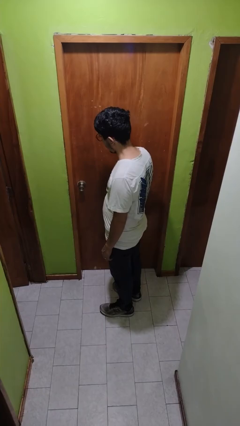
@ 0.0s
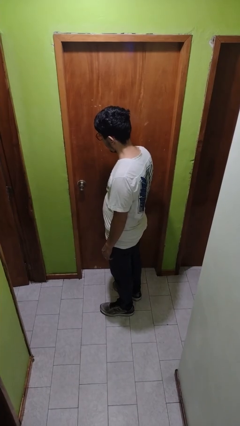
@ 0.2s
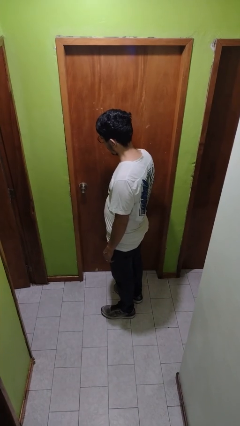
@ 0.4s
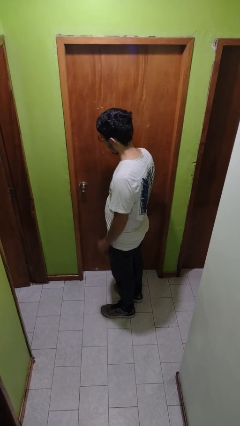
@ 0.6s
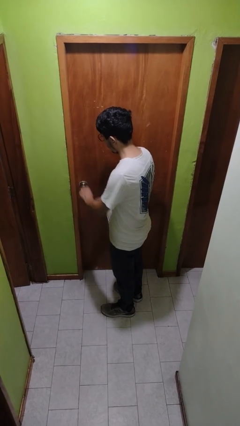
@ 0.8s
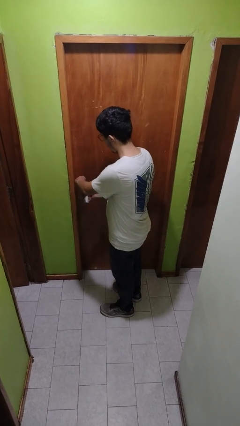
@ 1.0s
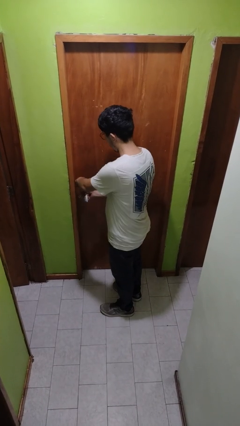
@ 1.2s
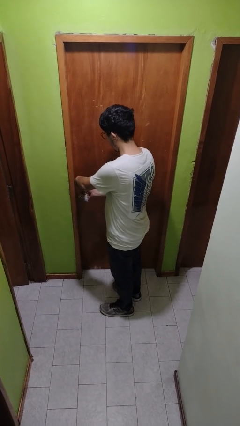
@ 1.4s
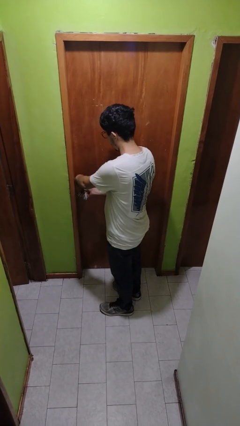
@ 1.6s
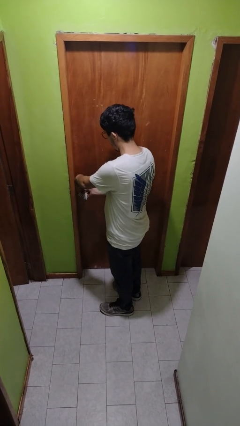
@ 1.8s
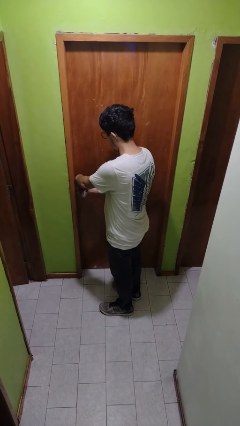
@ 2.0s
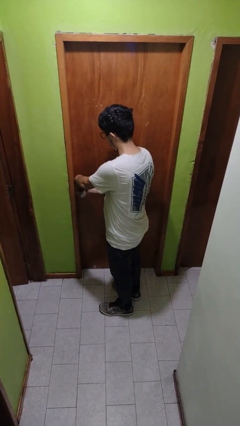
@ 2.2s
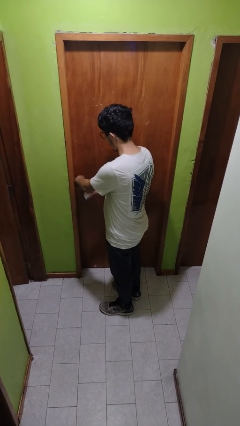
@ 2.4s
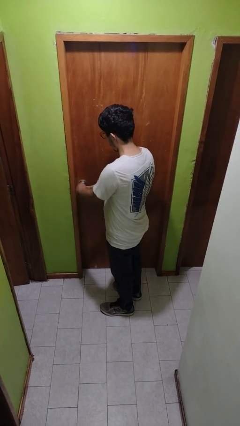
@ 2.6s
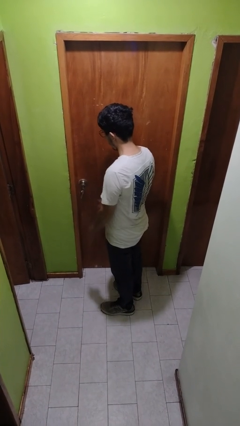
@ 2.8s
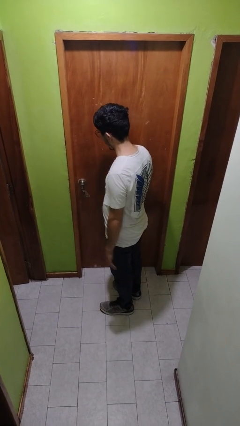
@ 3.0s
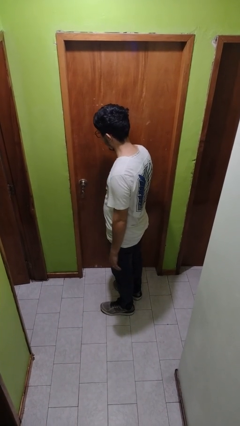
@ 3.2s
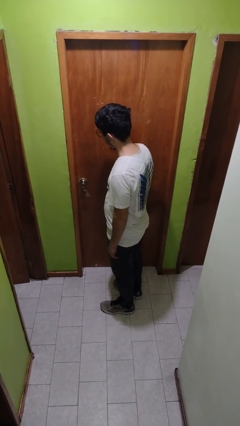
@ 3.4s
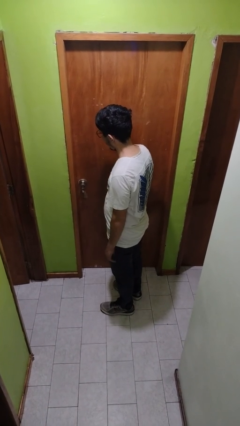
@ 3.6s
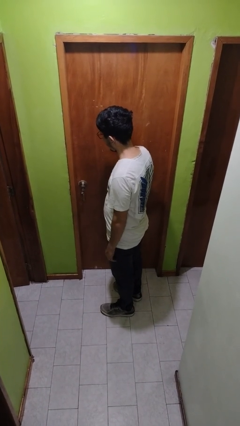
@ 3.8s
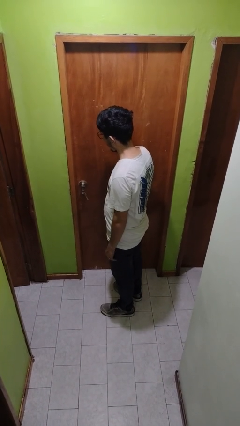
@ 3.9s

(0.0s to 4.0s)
person unlocks door with keys

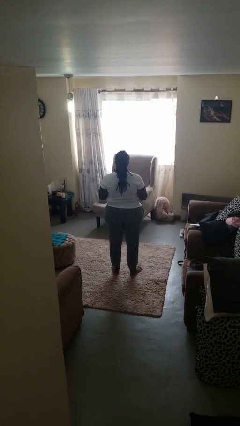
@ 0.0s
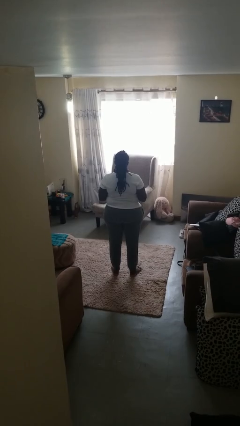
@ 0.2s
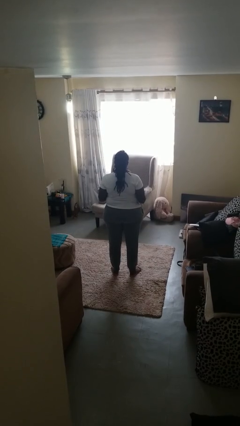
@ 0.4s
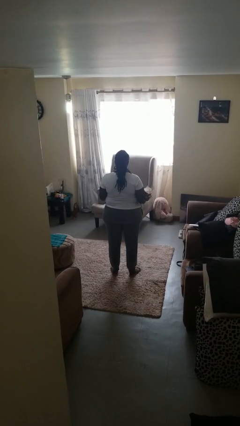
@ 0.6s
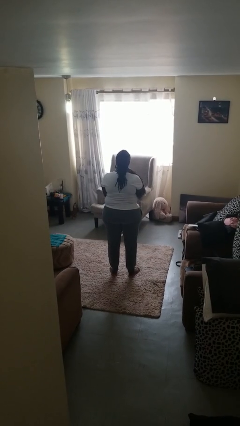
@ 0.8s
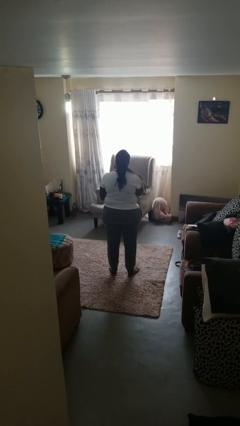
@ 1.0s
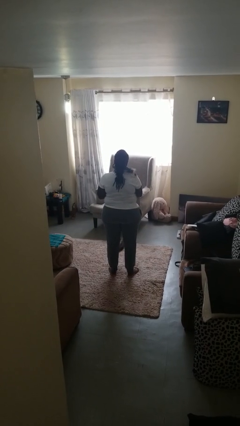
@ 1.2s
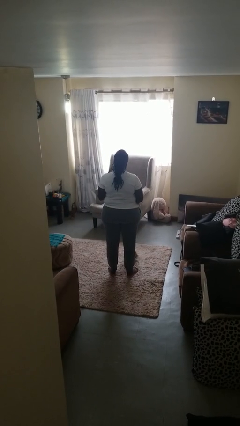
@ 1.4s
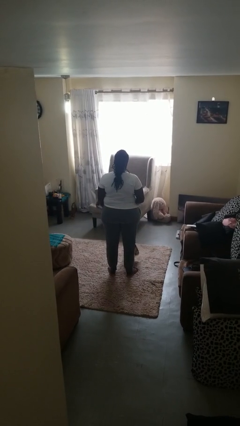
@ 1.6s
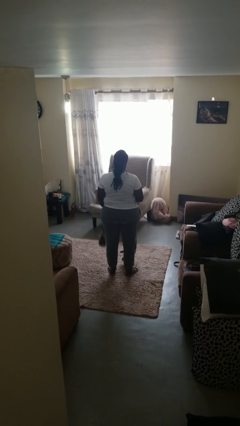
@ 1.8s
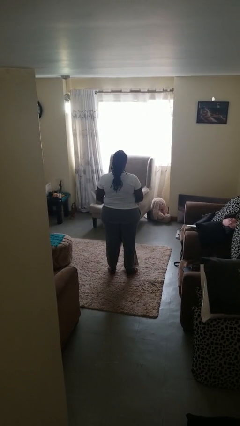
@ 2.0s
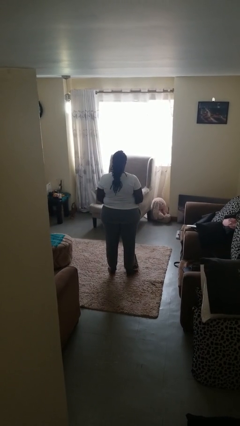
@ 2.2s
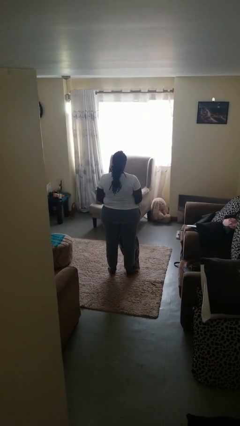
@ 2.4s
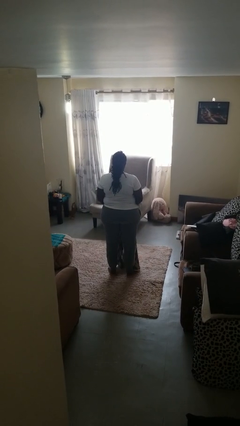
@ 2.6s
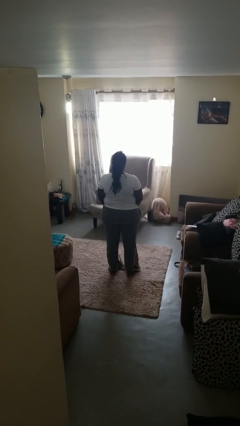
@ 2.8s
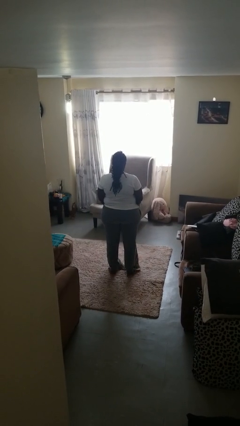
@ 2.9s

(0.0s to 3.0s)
person takes off scarf

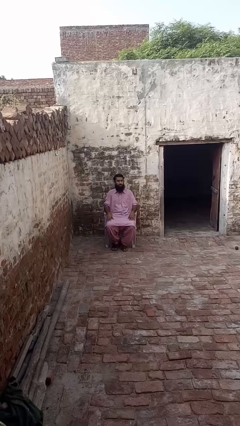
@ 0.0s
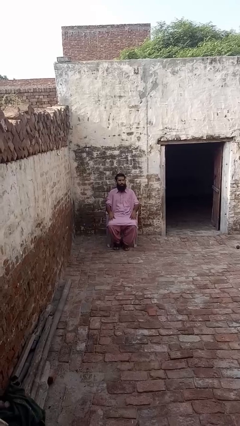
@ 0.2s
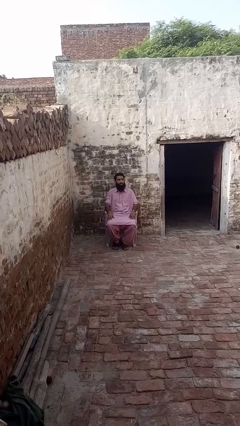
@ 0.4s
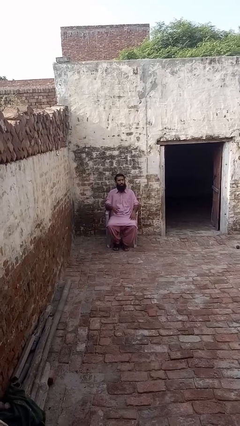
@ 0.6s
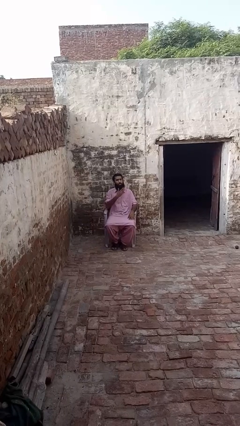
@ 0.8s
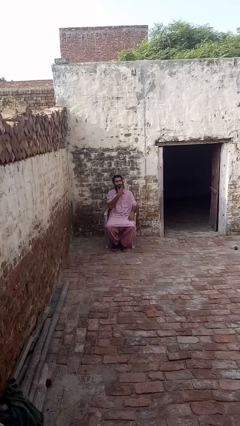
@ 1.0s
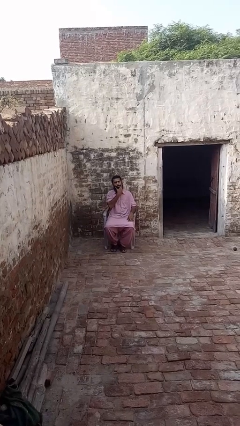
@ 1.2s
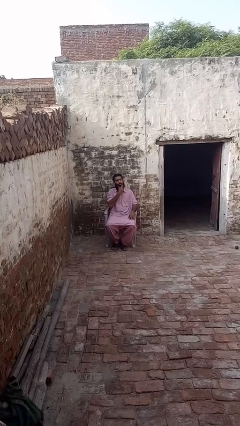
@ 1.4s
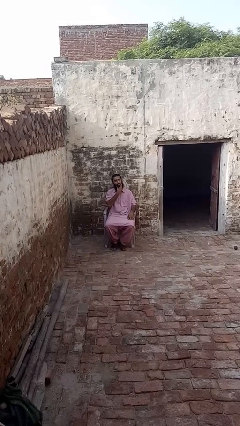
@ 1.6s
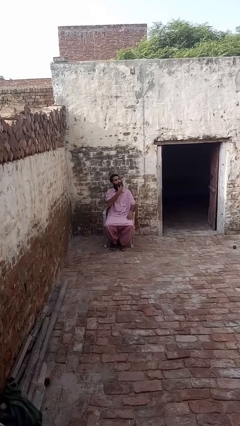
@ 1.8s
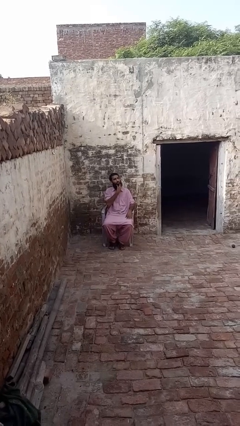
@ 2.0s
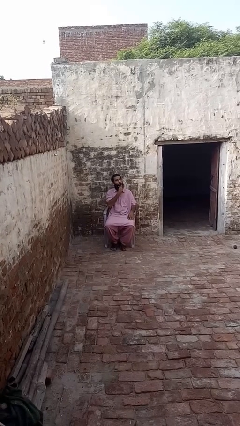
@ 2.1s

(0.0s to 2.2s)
person strokes chin

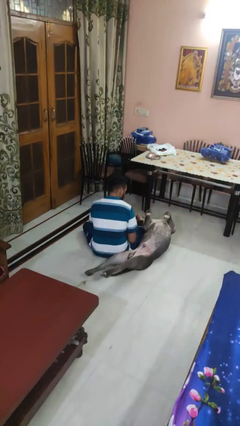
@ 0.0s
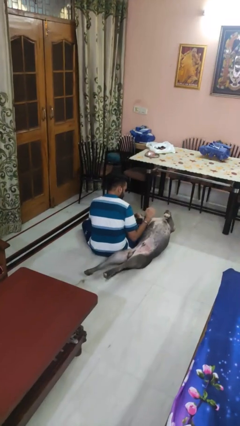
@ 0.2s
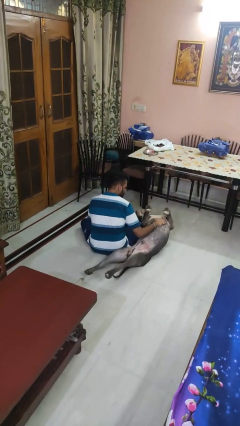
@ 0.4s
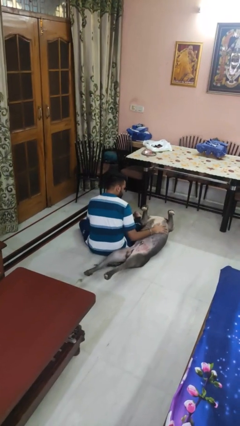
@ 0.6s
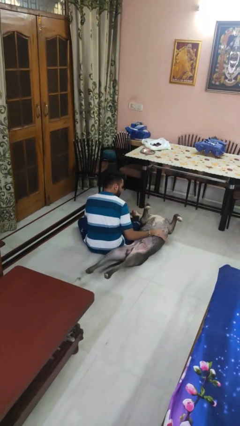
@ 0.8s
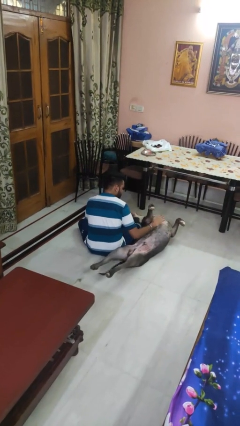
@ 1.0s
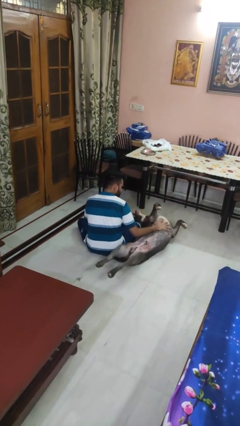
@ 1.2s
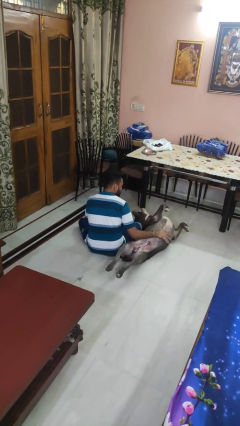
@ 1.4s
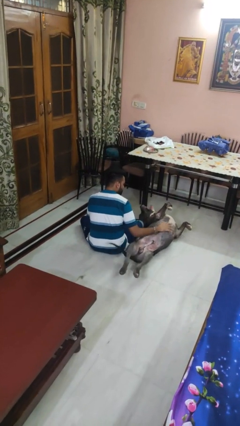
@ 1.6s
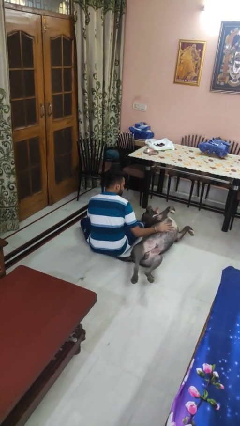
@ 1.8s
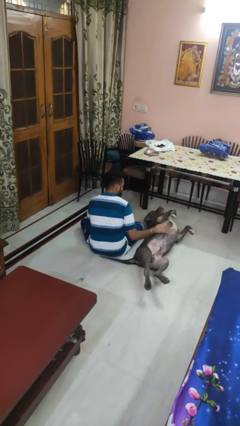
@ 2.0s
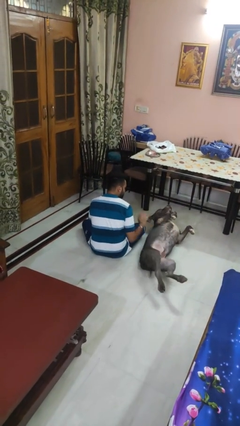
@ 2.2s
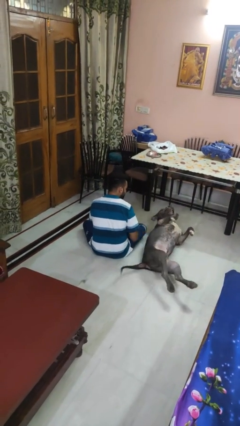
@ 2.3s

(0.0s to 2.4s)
person pets dog

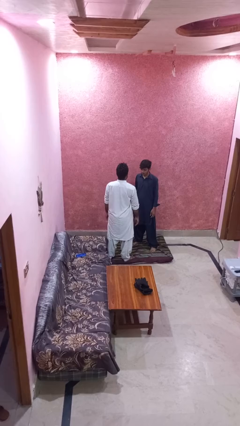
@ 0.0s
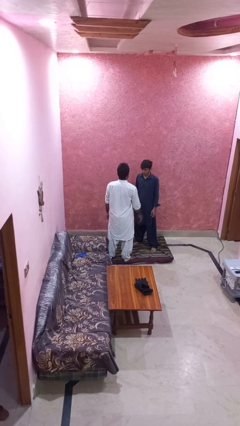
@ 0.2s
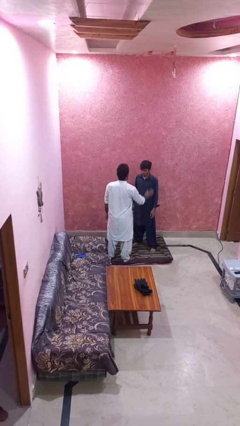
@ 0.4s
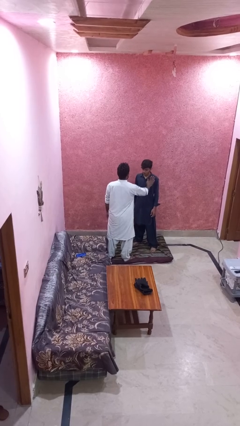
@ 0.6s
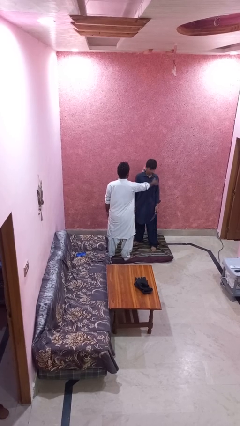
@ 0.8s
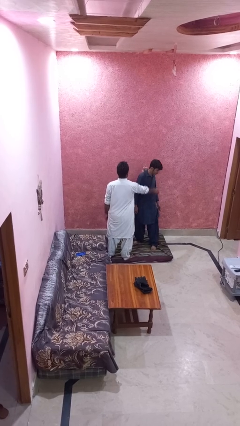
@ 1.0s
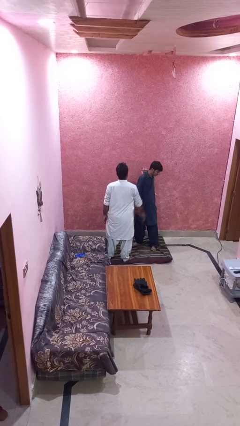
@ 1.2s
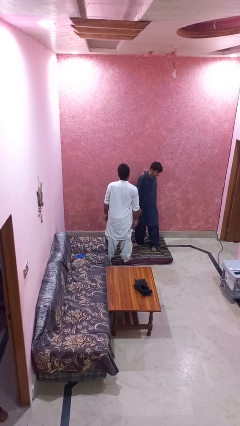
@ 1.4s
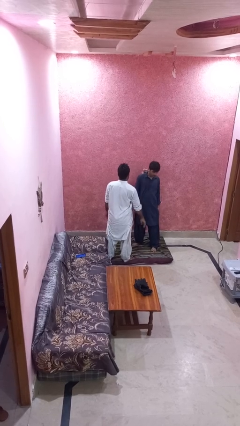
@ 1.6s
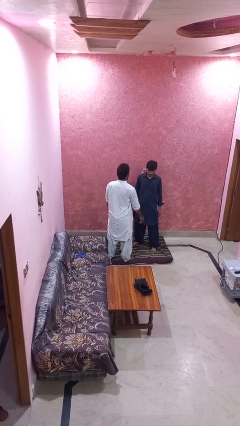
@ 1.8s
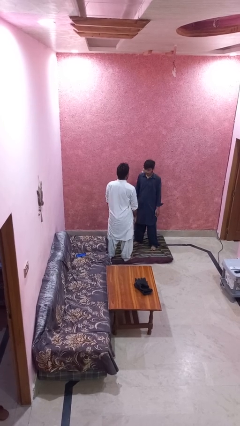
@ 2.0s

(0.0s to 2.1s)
person shoves person

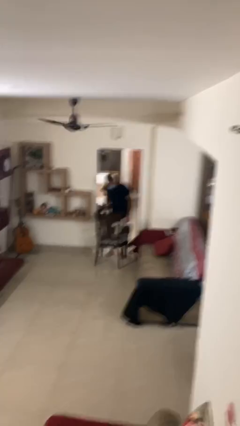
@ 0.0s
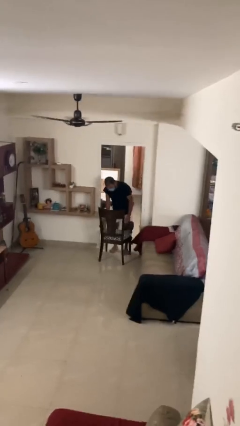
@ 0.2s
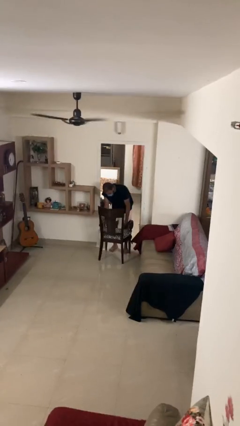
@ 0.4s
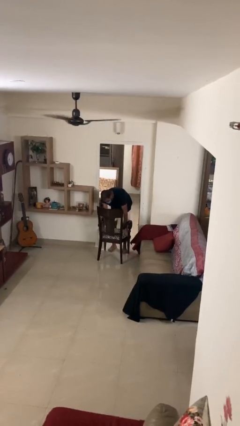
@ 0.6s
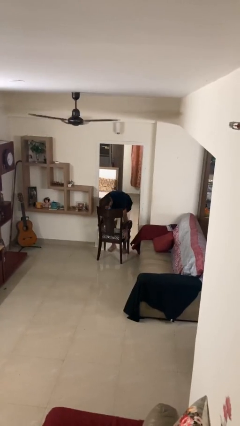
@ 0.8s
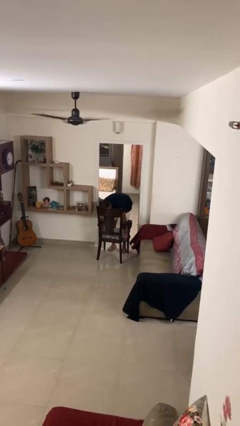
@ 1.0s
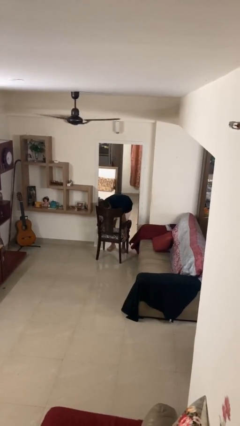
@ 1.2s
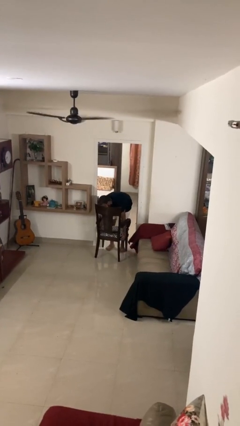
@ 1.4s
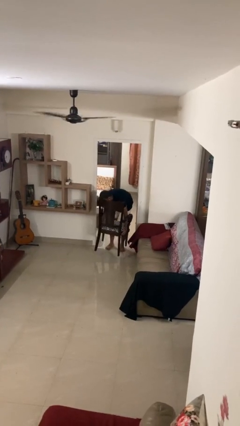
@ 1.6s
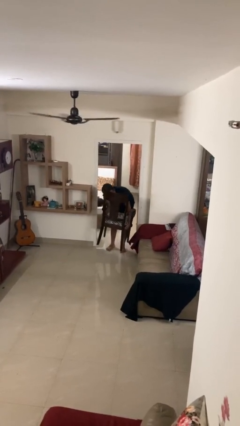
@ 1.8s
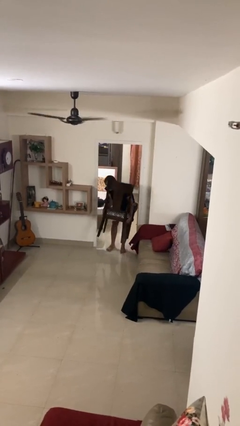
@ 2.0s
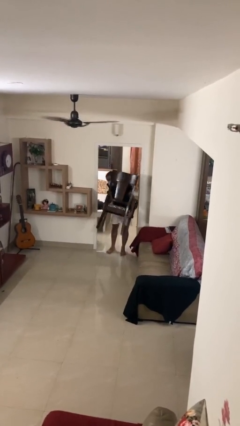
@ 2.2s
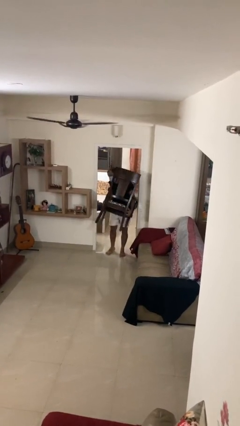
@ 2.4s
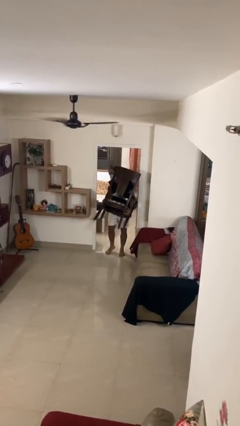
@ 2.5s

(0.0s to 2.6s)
person picks up object from floor

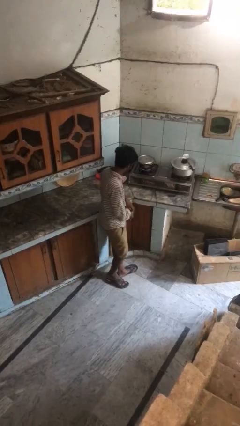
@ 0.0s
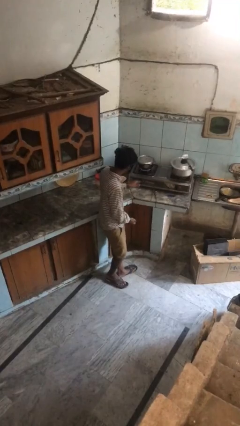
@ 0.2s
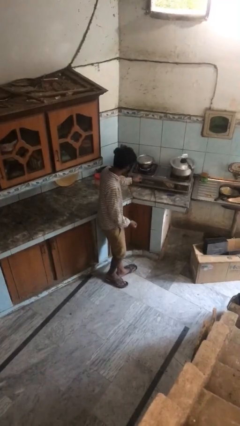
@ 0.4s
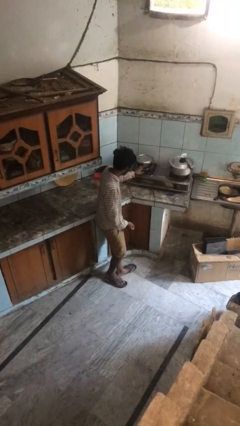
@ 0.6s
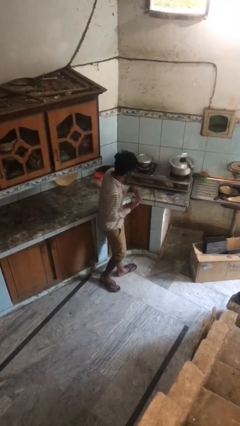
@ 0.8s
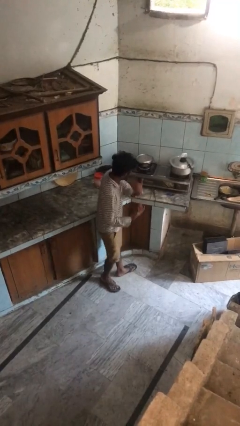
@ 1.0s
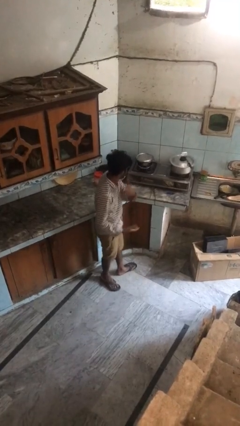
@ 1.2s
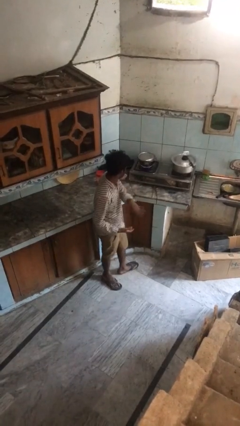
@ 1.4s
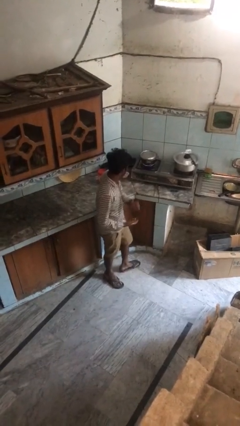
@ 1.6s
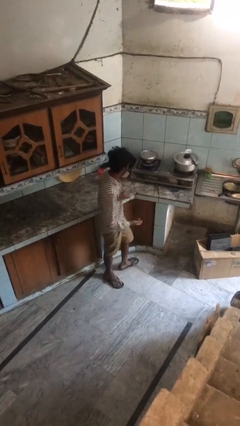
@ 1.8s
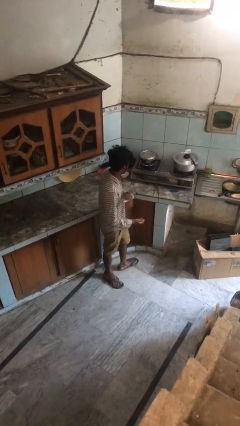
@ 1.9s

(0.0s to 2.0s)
person burns hand
